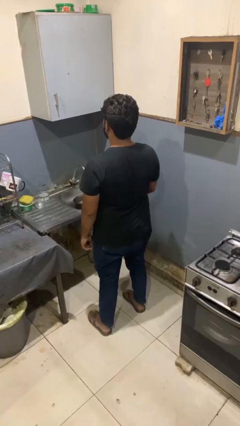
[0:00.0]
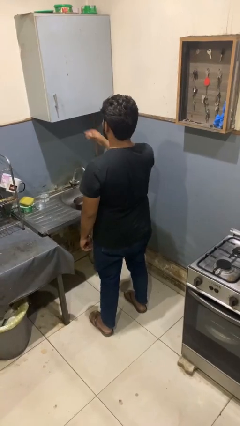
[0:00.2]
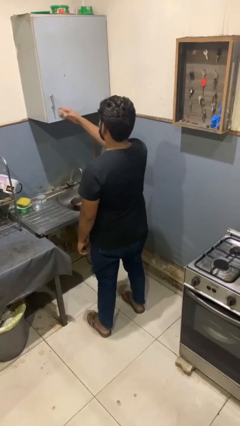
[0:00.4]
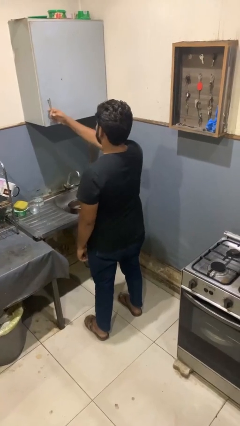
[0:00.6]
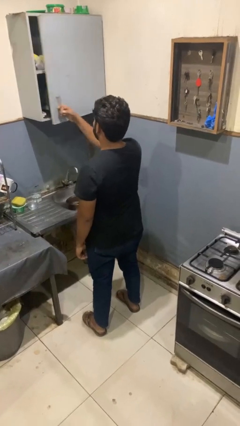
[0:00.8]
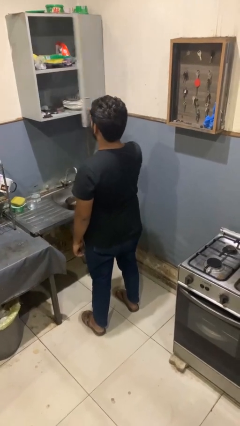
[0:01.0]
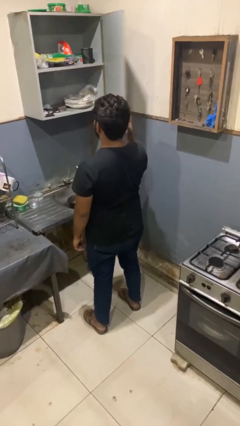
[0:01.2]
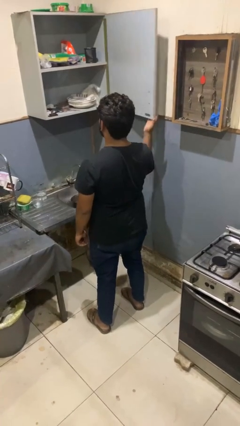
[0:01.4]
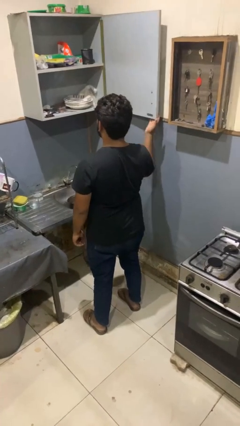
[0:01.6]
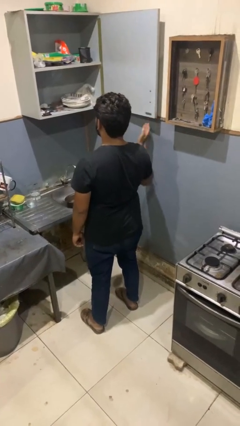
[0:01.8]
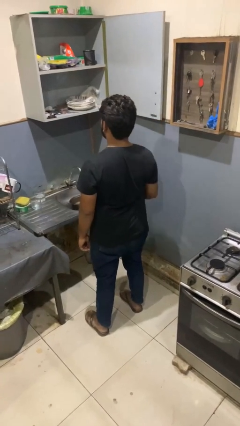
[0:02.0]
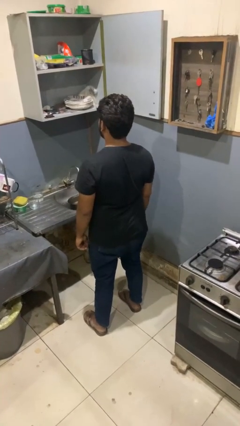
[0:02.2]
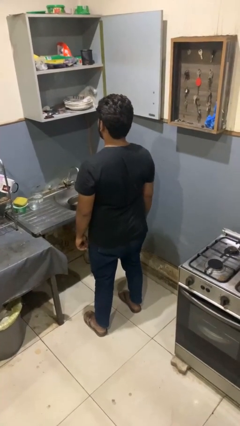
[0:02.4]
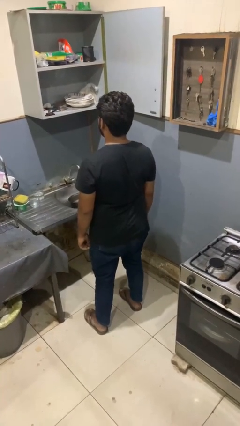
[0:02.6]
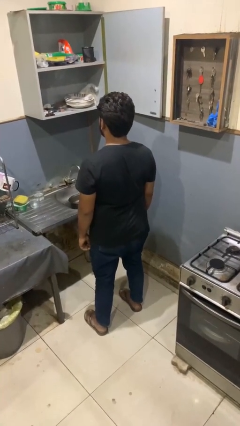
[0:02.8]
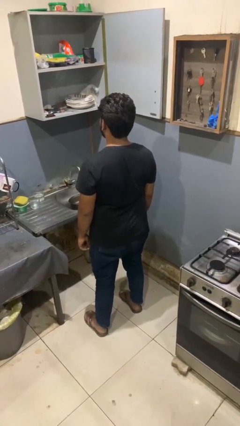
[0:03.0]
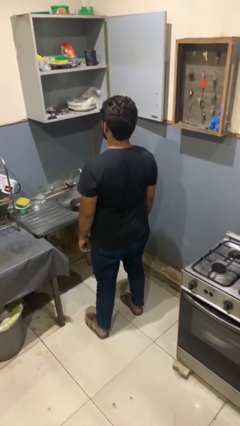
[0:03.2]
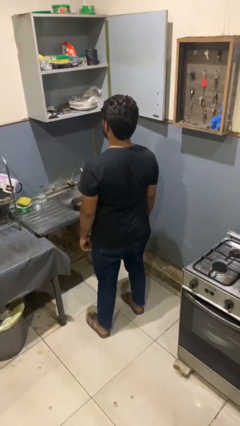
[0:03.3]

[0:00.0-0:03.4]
person opens kitchen drawer

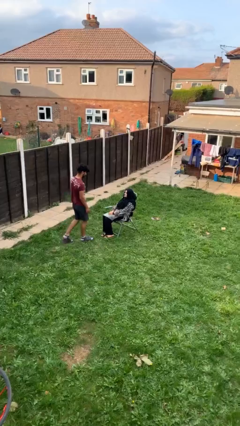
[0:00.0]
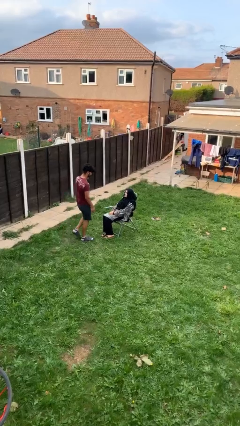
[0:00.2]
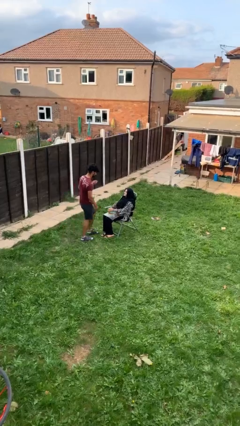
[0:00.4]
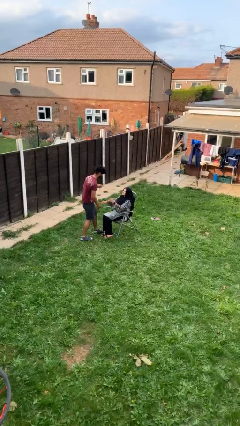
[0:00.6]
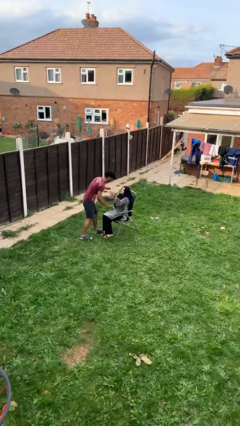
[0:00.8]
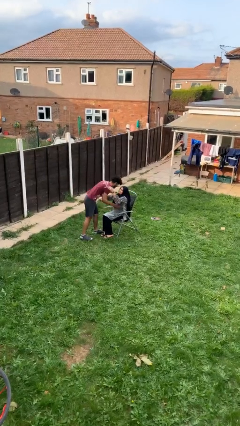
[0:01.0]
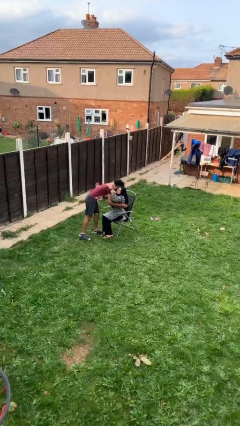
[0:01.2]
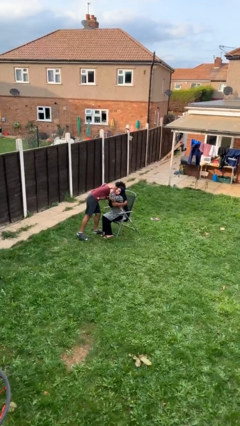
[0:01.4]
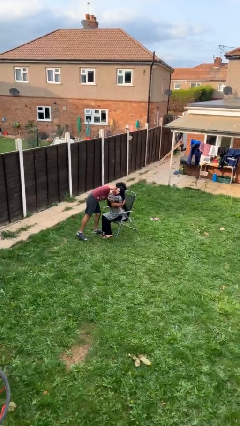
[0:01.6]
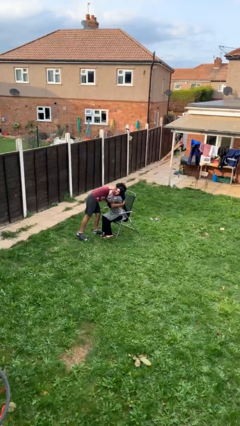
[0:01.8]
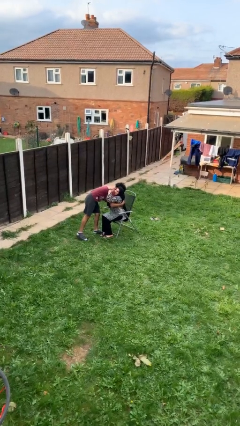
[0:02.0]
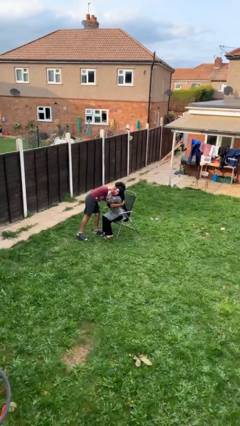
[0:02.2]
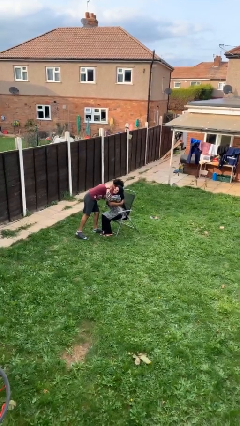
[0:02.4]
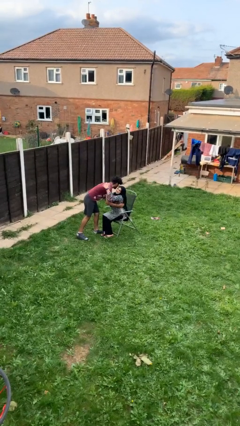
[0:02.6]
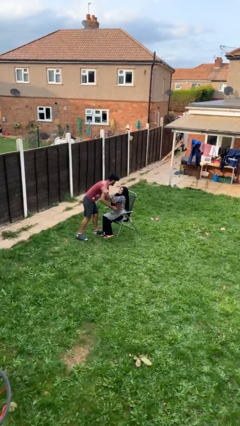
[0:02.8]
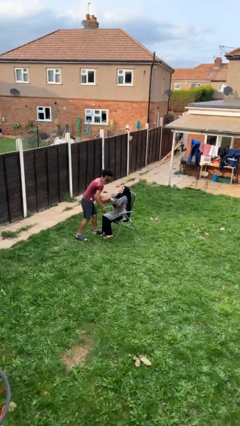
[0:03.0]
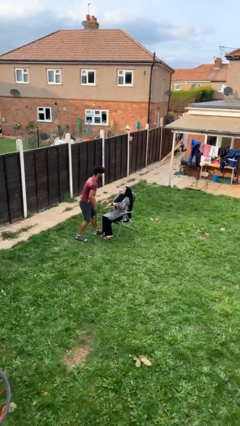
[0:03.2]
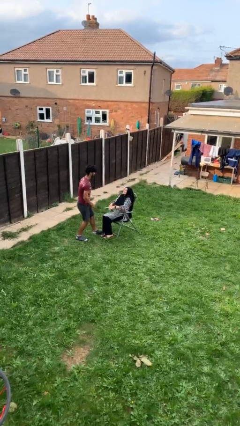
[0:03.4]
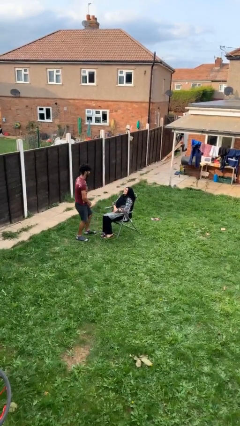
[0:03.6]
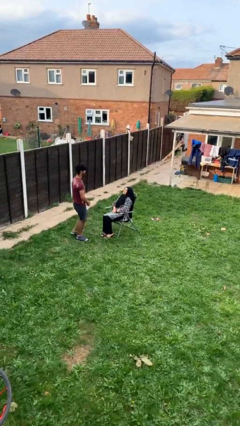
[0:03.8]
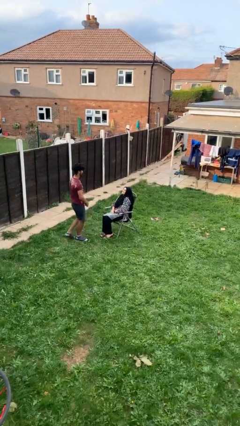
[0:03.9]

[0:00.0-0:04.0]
person embraces person

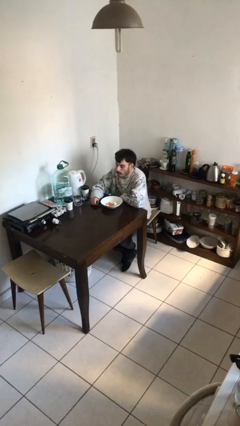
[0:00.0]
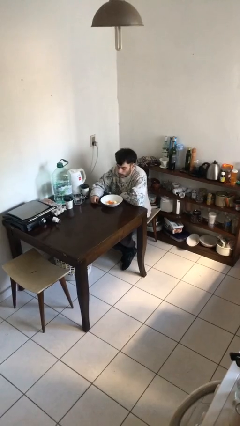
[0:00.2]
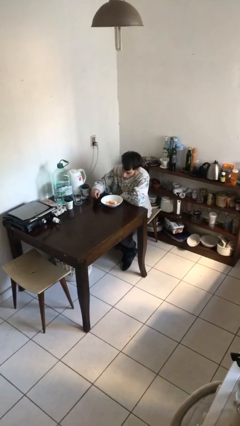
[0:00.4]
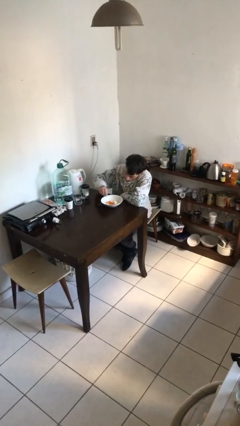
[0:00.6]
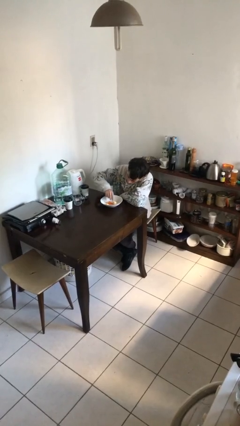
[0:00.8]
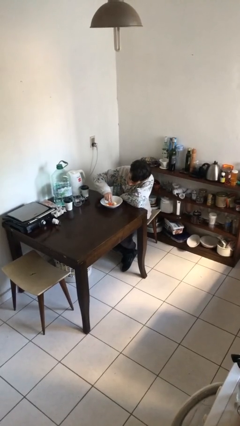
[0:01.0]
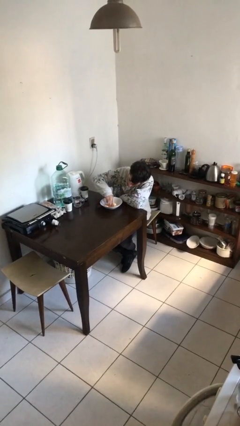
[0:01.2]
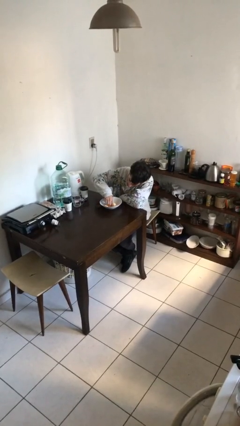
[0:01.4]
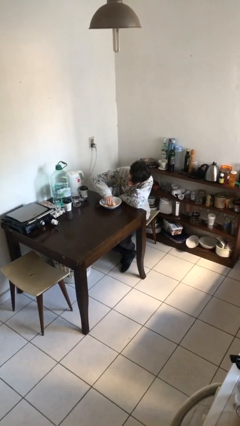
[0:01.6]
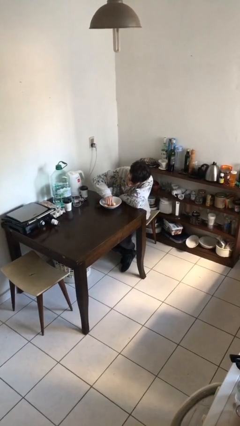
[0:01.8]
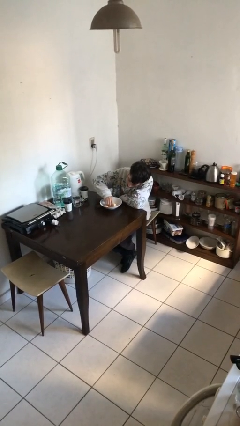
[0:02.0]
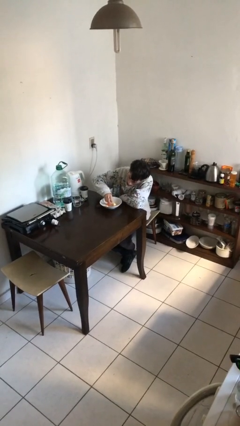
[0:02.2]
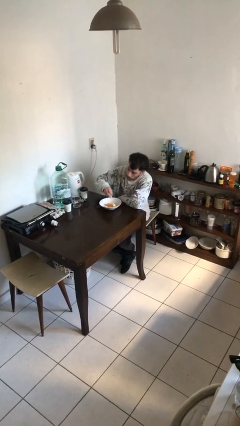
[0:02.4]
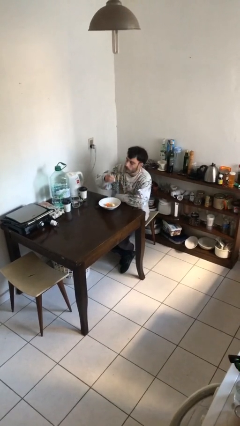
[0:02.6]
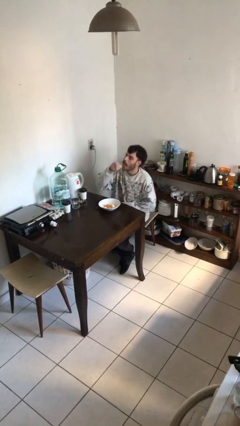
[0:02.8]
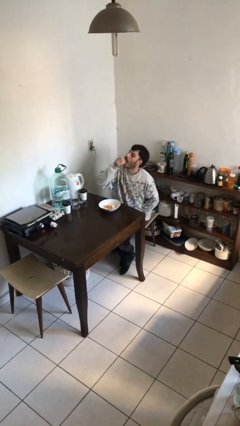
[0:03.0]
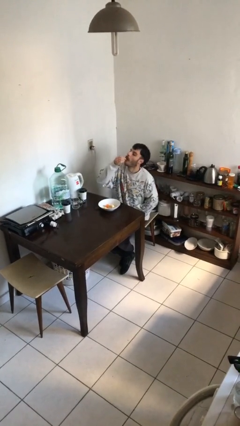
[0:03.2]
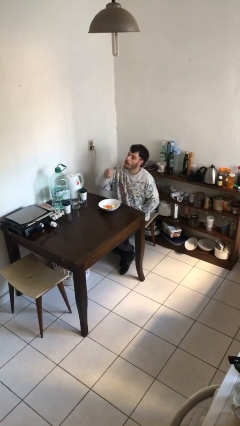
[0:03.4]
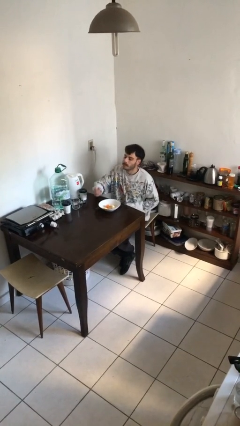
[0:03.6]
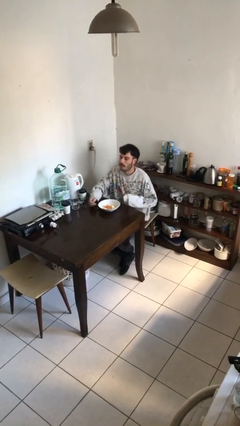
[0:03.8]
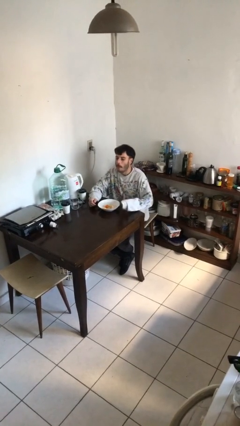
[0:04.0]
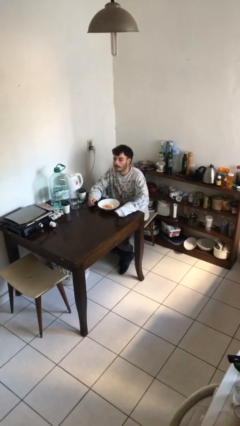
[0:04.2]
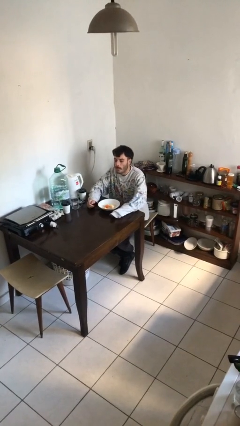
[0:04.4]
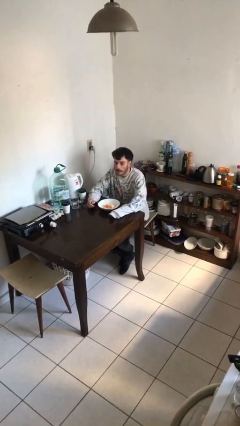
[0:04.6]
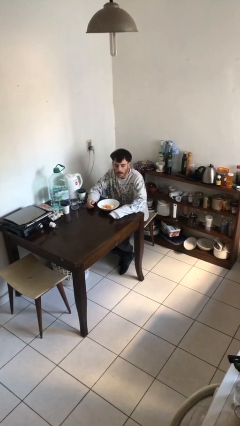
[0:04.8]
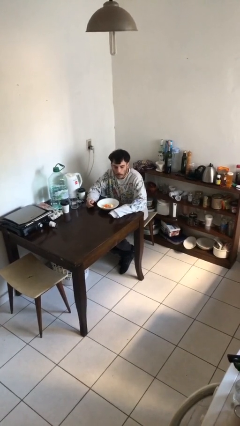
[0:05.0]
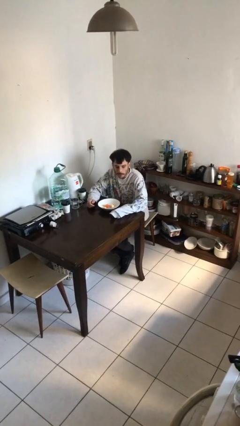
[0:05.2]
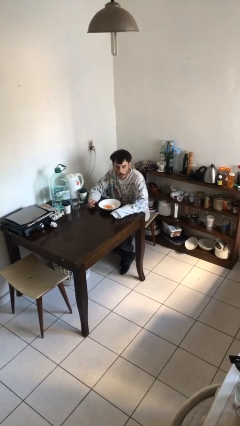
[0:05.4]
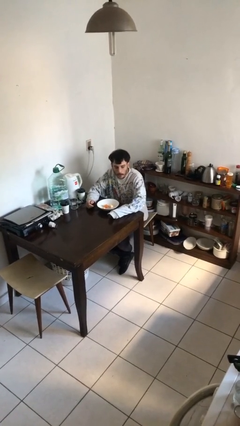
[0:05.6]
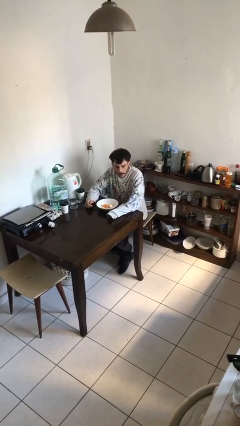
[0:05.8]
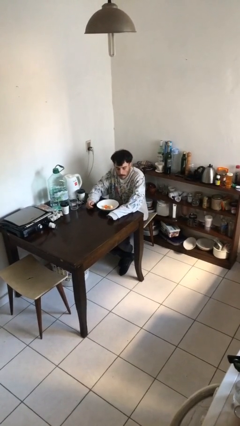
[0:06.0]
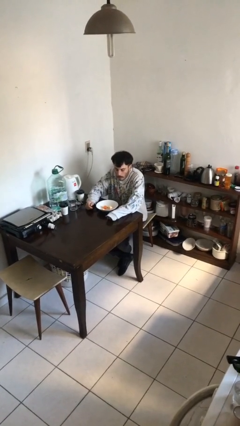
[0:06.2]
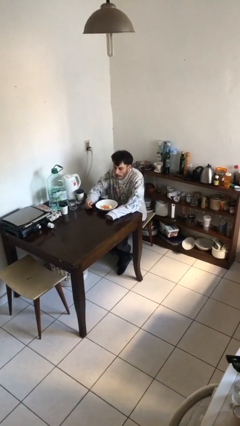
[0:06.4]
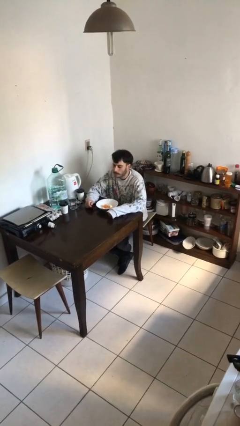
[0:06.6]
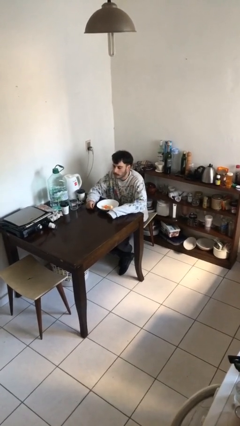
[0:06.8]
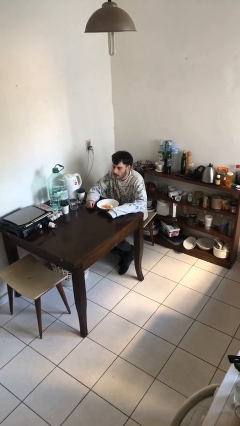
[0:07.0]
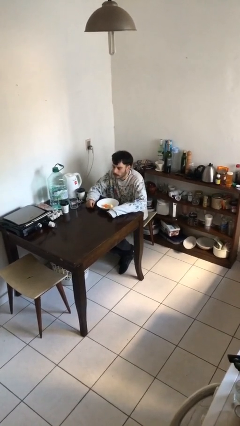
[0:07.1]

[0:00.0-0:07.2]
person eats with hands

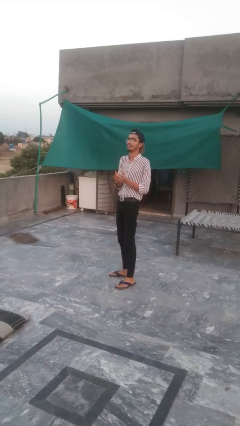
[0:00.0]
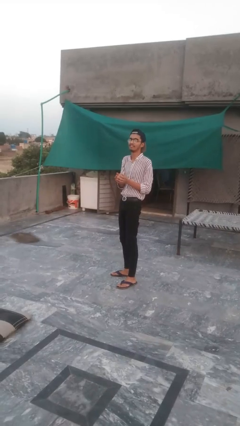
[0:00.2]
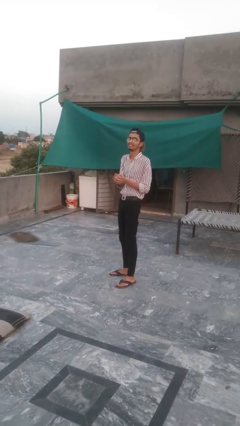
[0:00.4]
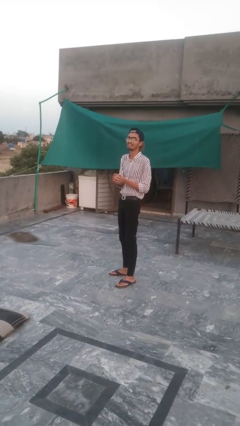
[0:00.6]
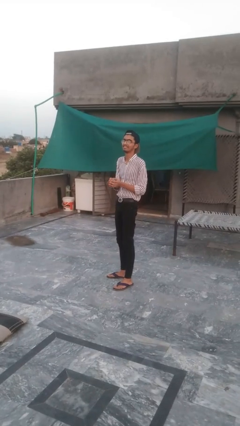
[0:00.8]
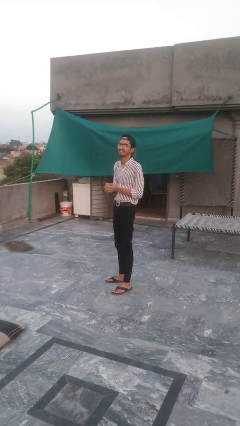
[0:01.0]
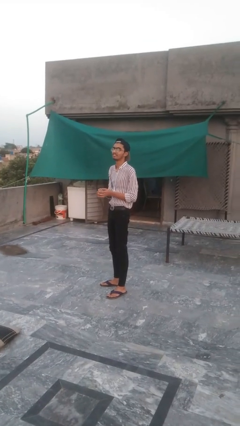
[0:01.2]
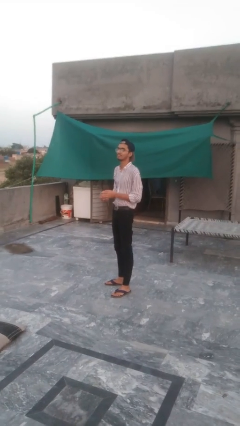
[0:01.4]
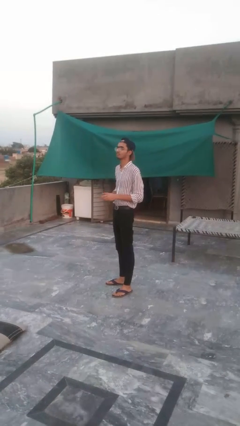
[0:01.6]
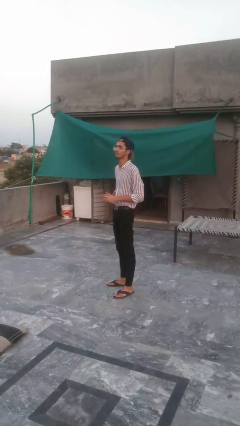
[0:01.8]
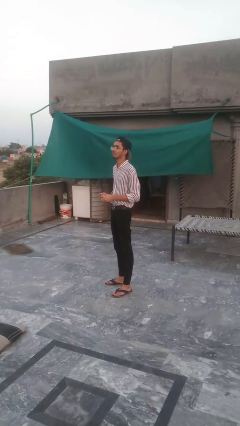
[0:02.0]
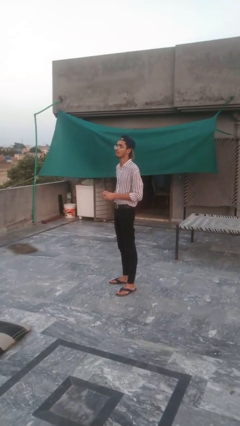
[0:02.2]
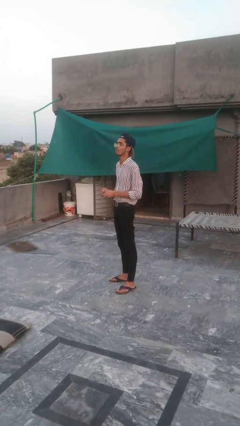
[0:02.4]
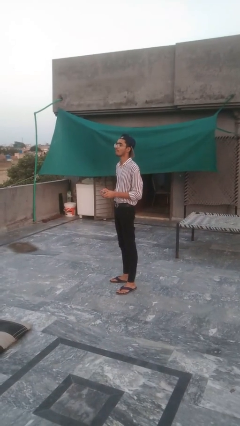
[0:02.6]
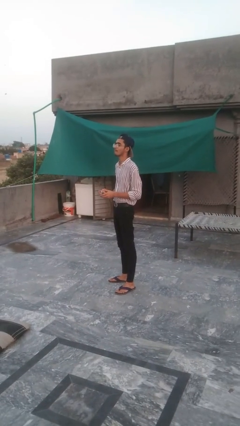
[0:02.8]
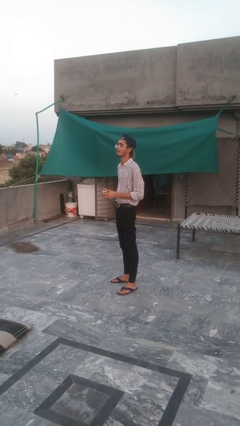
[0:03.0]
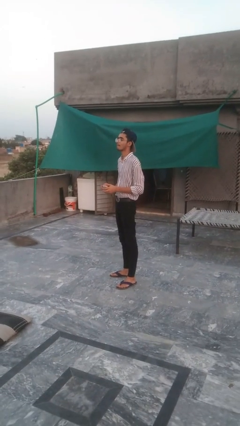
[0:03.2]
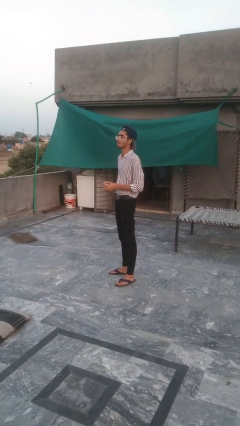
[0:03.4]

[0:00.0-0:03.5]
person catches dropped object
